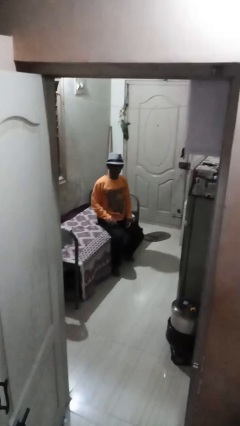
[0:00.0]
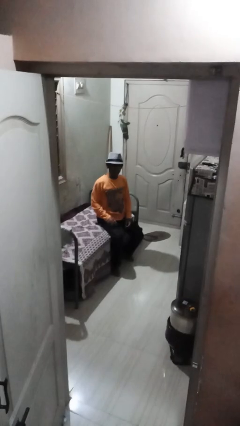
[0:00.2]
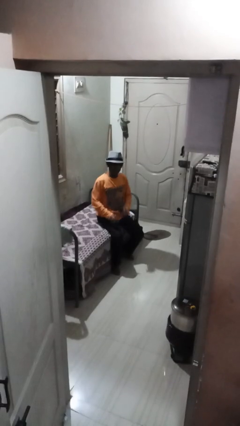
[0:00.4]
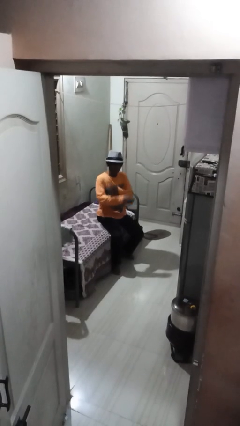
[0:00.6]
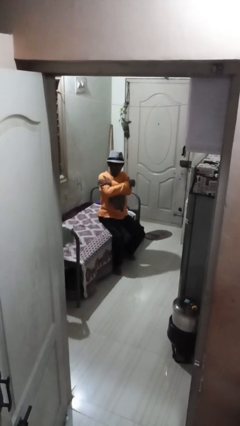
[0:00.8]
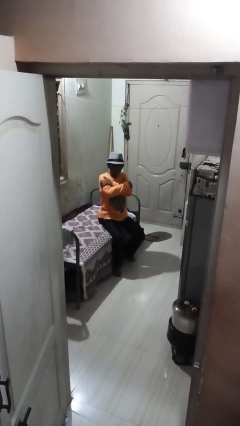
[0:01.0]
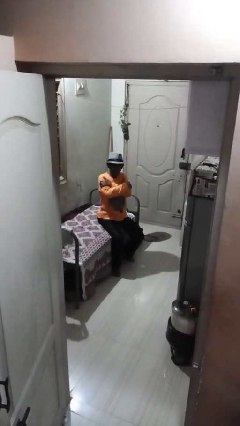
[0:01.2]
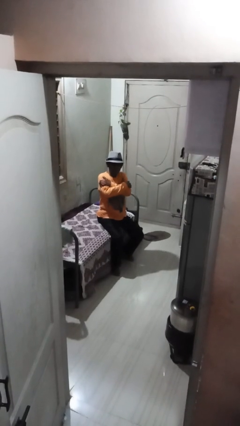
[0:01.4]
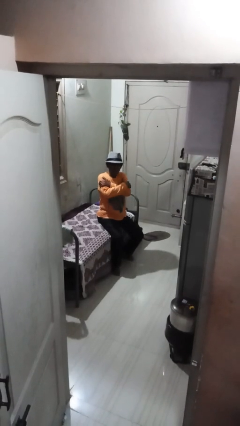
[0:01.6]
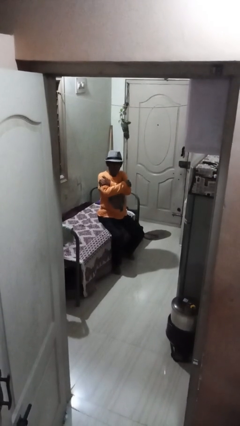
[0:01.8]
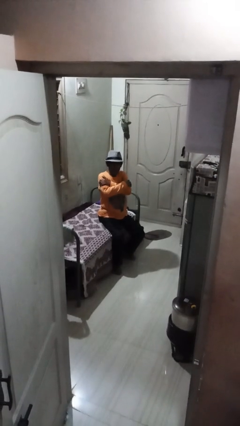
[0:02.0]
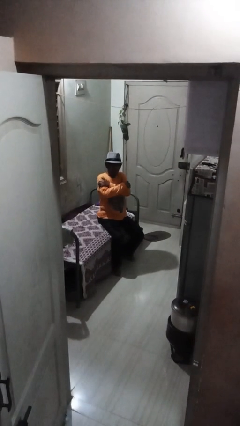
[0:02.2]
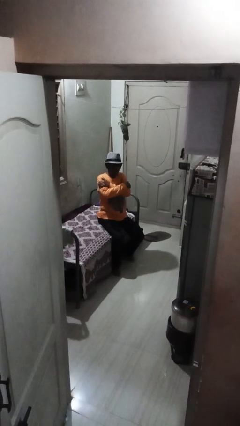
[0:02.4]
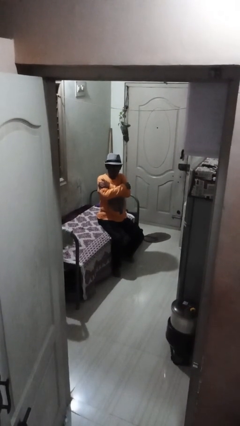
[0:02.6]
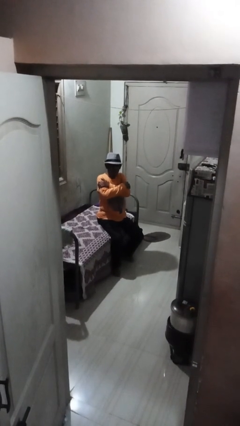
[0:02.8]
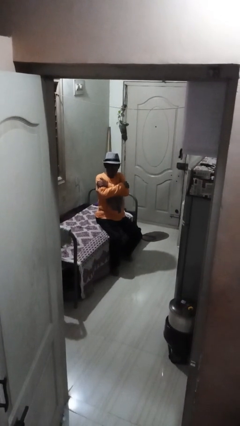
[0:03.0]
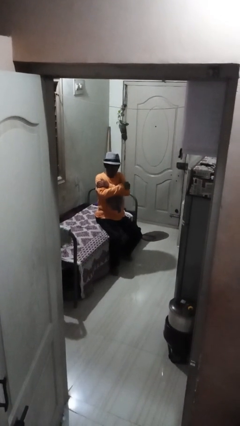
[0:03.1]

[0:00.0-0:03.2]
person crosses arms

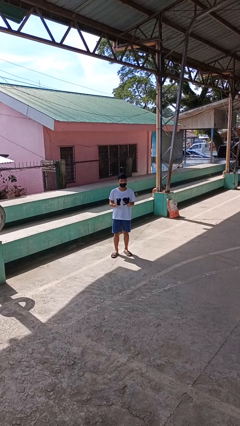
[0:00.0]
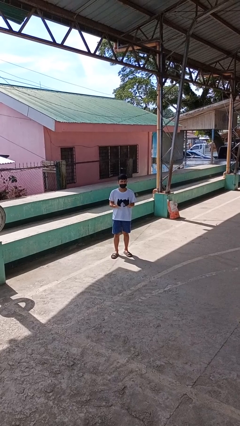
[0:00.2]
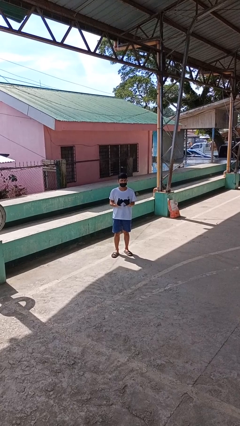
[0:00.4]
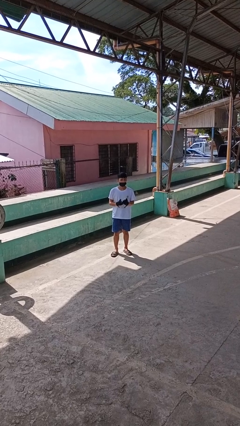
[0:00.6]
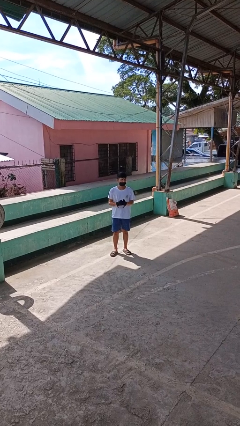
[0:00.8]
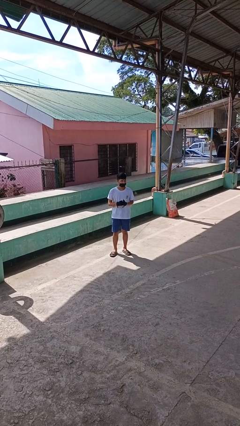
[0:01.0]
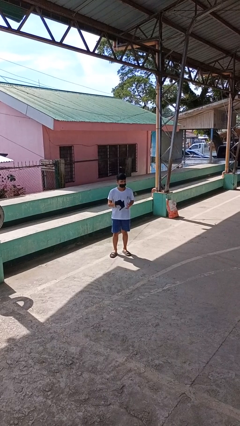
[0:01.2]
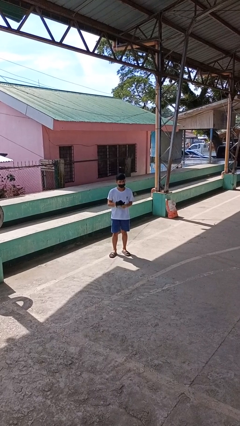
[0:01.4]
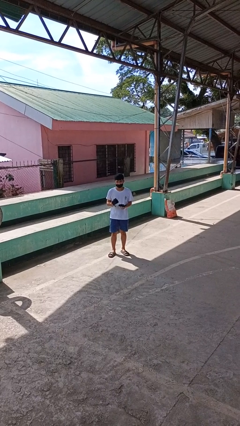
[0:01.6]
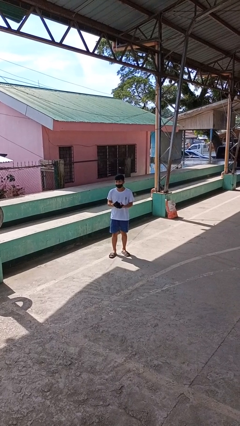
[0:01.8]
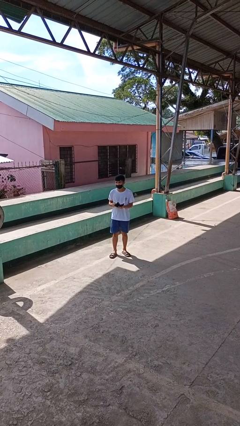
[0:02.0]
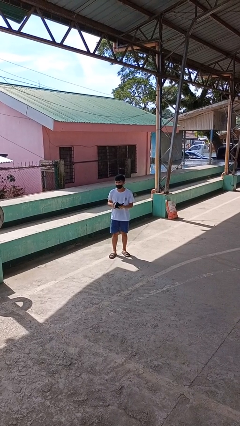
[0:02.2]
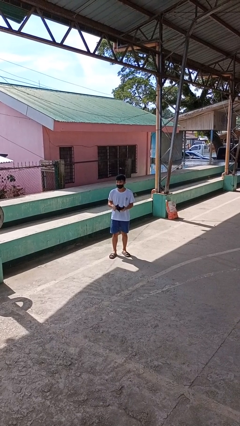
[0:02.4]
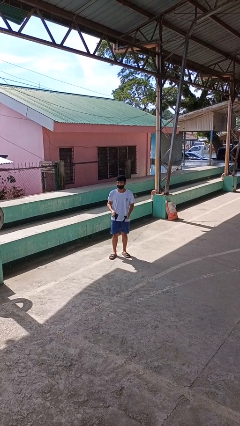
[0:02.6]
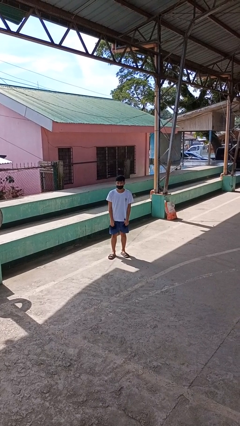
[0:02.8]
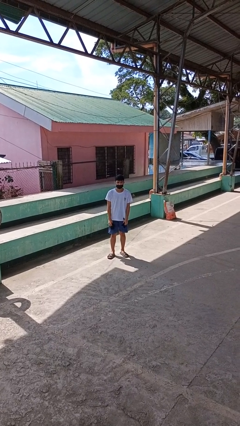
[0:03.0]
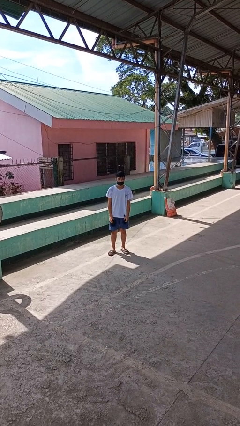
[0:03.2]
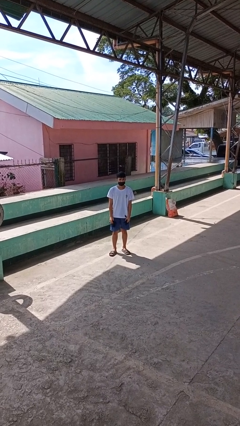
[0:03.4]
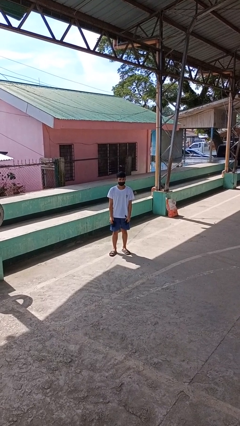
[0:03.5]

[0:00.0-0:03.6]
person takes off gloves

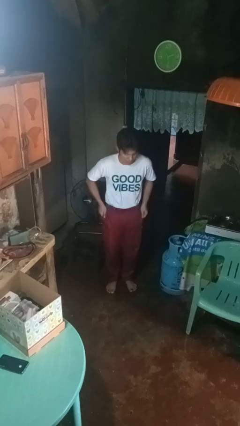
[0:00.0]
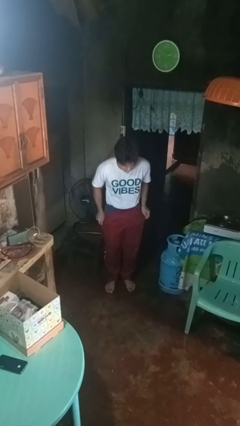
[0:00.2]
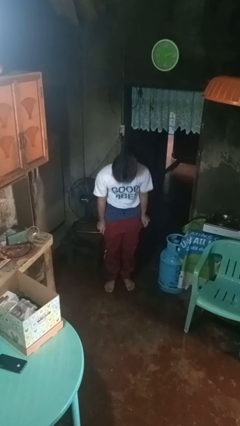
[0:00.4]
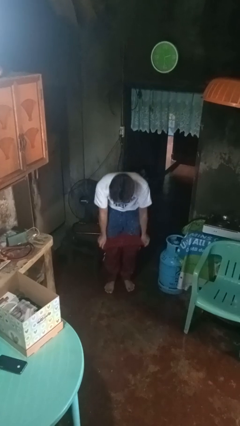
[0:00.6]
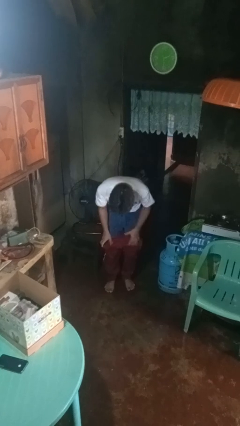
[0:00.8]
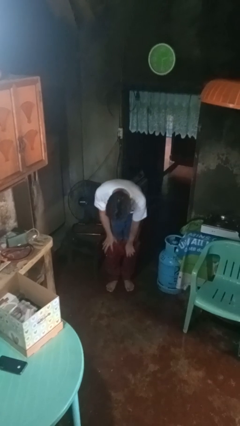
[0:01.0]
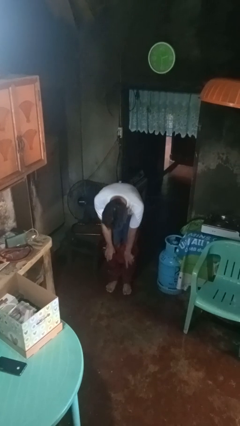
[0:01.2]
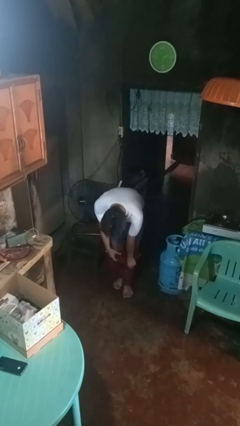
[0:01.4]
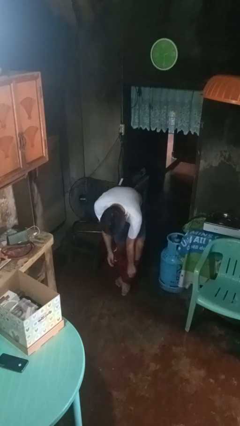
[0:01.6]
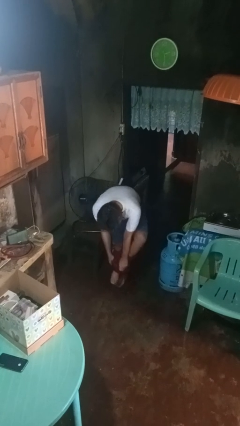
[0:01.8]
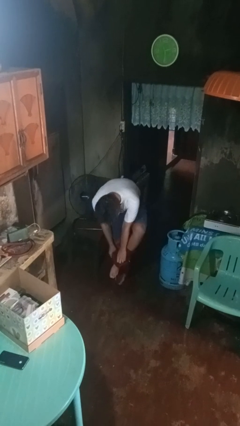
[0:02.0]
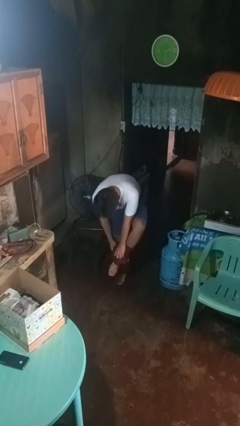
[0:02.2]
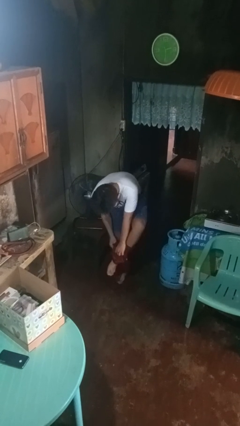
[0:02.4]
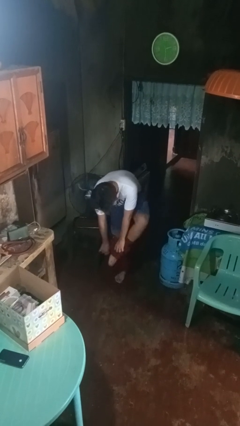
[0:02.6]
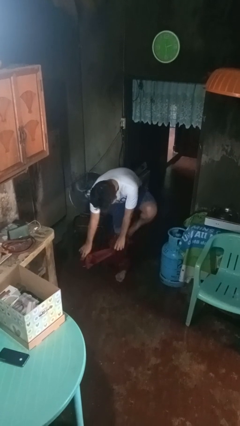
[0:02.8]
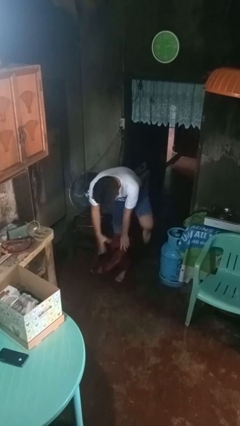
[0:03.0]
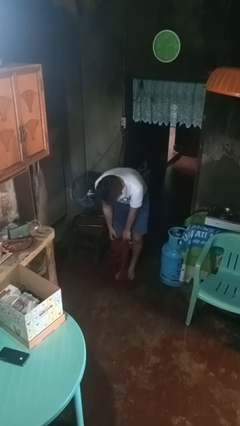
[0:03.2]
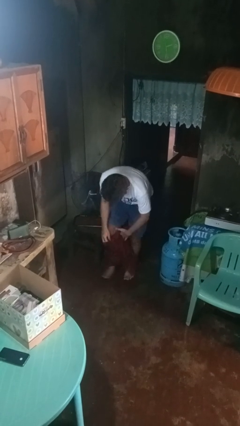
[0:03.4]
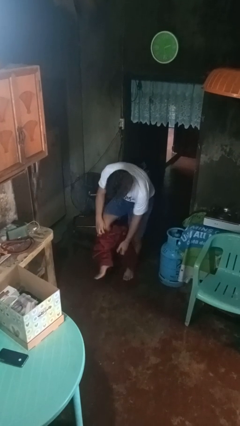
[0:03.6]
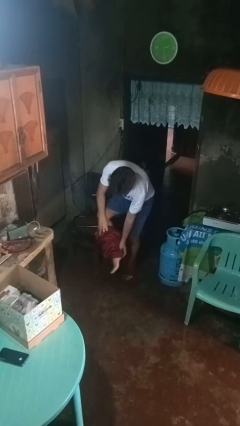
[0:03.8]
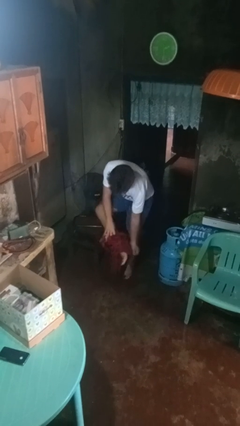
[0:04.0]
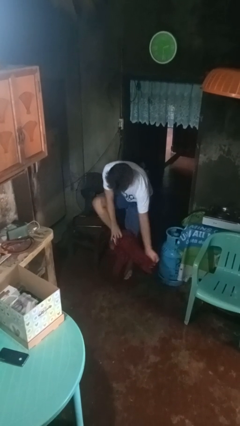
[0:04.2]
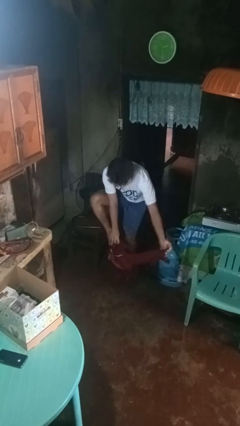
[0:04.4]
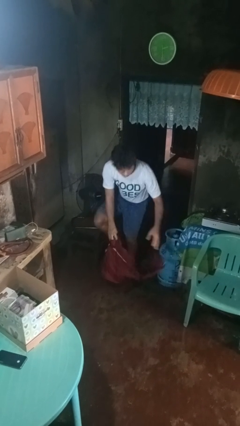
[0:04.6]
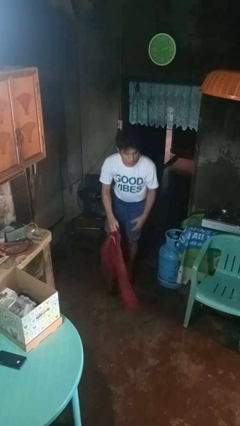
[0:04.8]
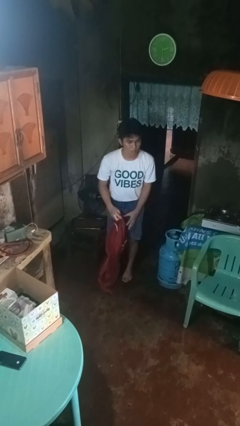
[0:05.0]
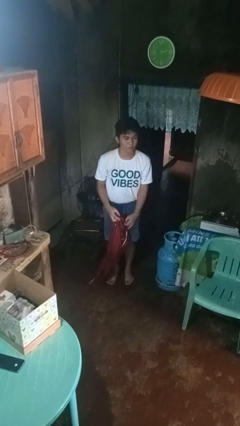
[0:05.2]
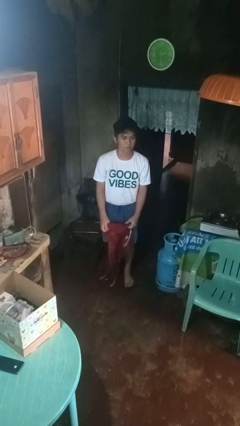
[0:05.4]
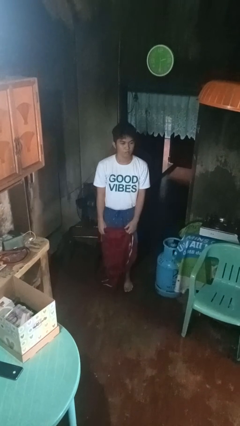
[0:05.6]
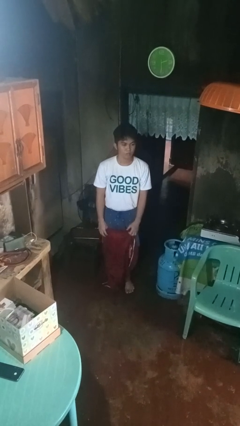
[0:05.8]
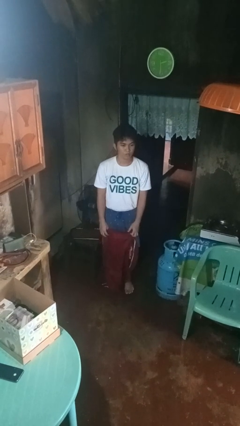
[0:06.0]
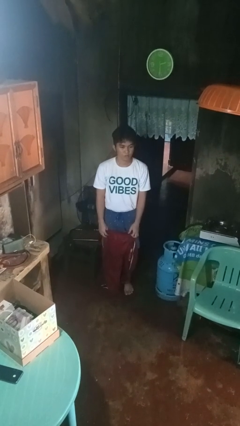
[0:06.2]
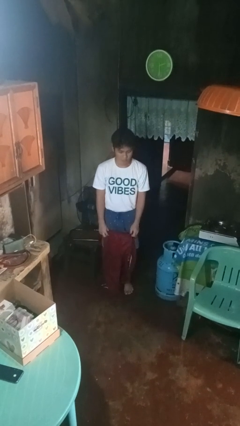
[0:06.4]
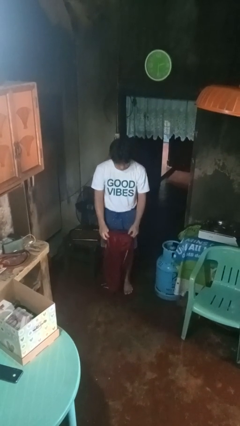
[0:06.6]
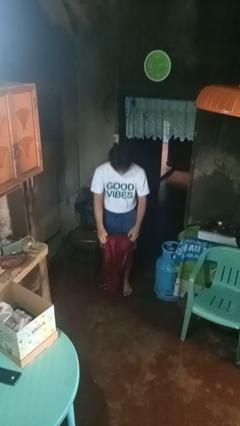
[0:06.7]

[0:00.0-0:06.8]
person takes off pants

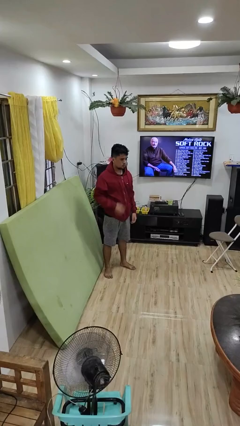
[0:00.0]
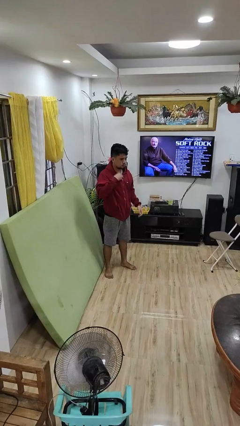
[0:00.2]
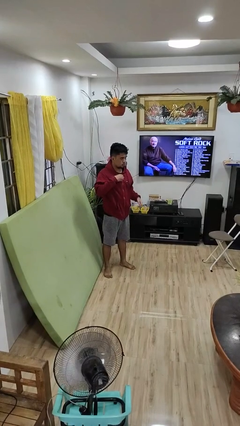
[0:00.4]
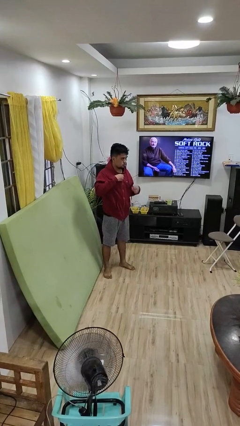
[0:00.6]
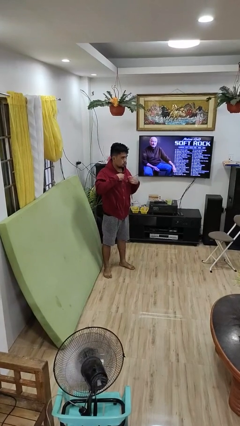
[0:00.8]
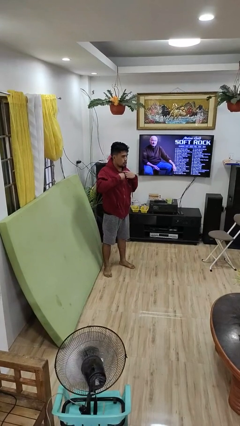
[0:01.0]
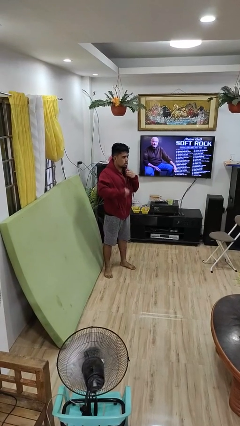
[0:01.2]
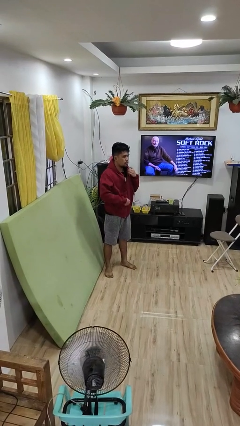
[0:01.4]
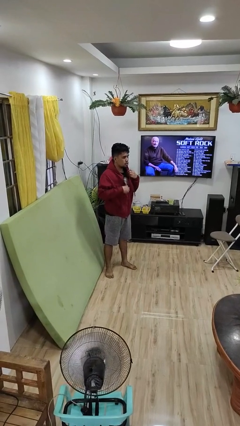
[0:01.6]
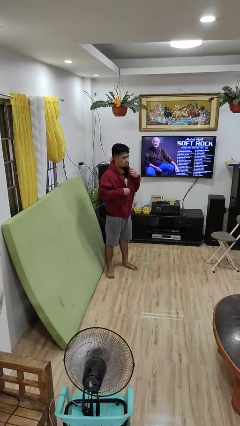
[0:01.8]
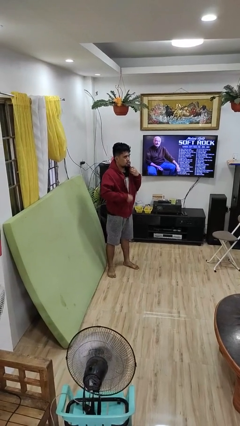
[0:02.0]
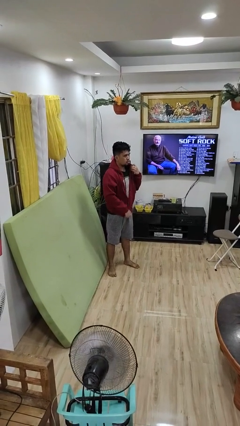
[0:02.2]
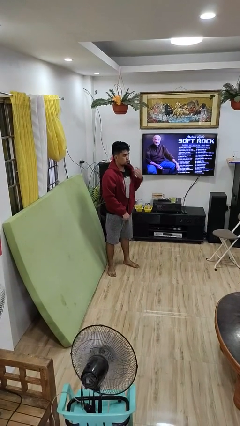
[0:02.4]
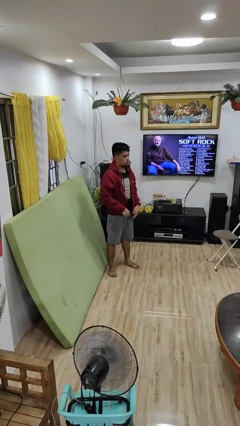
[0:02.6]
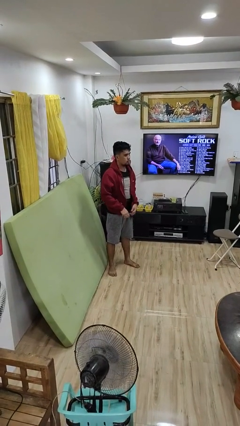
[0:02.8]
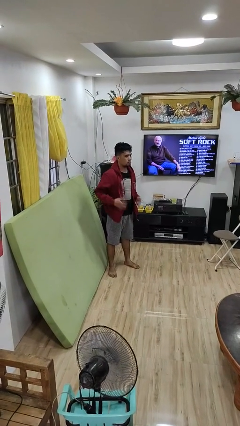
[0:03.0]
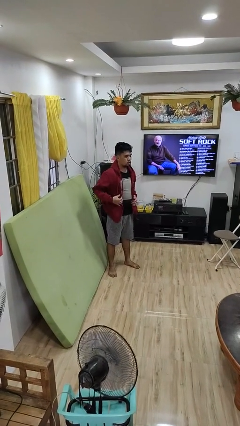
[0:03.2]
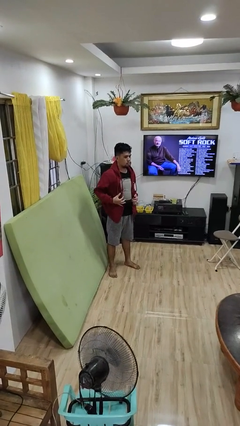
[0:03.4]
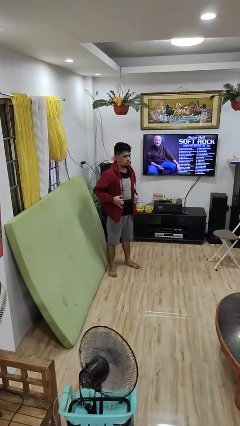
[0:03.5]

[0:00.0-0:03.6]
person unzips jacket

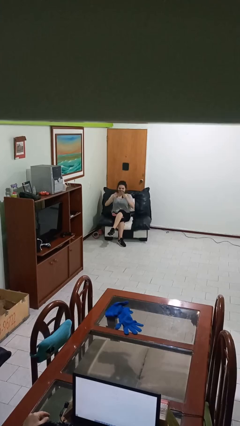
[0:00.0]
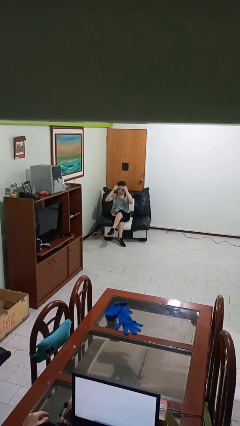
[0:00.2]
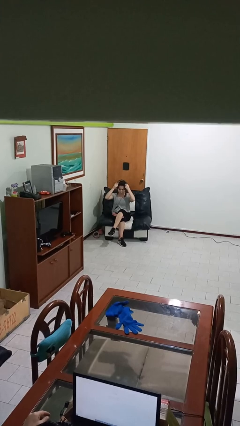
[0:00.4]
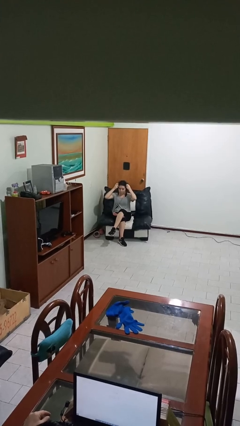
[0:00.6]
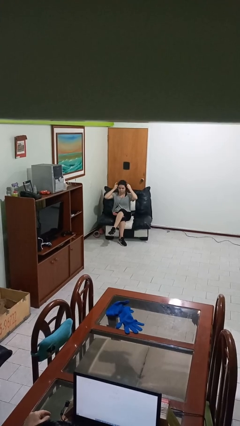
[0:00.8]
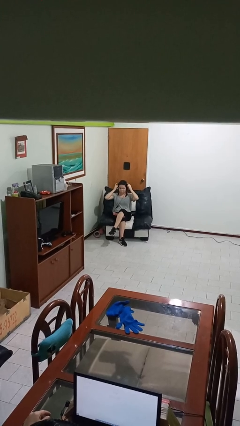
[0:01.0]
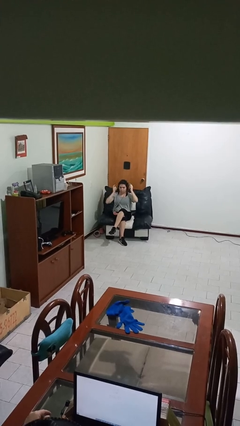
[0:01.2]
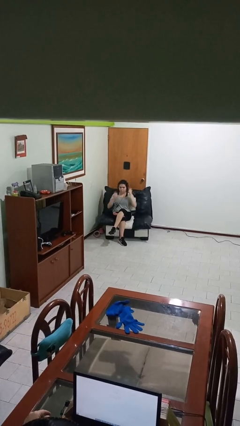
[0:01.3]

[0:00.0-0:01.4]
person puts on headphones
